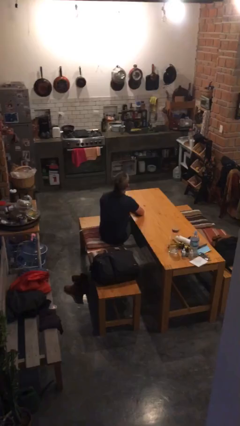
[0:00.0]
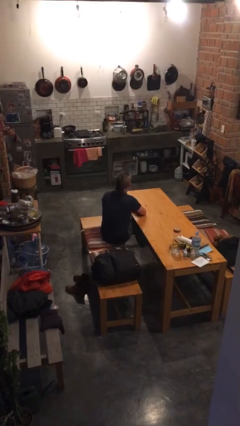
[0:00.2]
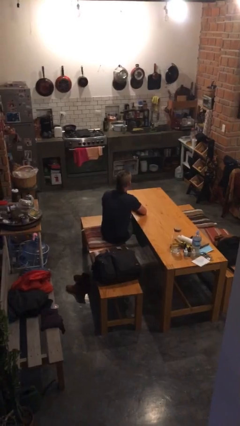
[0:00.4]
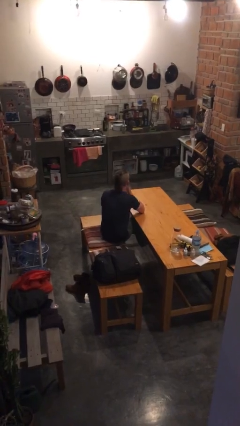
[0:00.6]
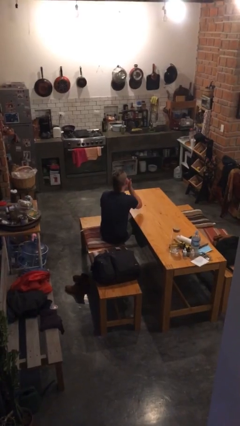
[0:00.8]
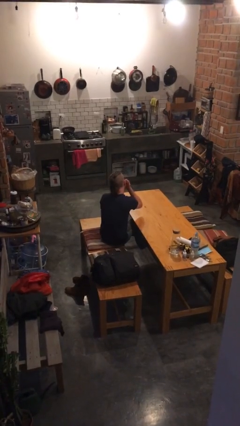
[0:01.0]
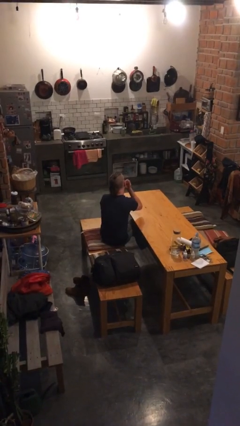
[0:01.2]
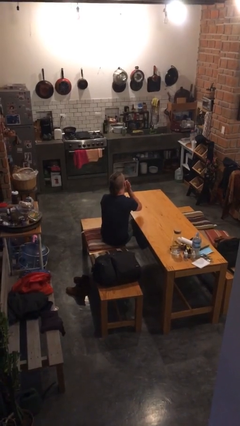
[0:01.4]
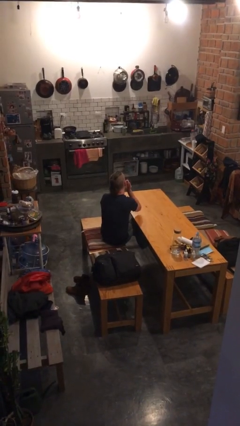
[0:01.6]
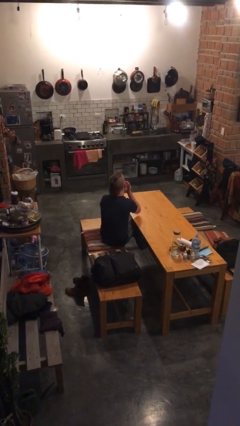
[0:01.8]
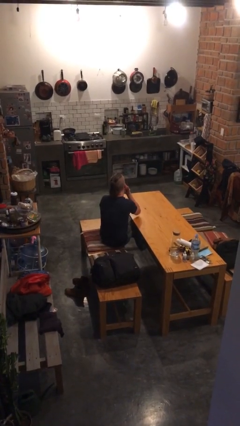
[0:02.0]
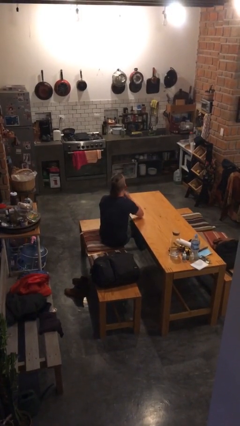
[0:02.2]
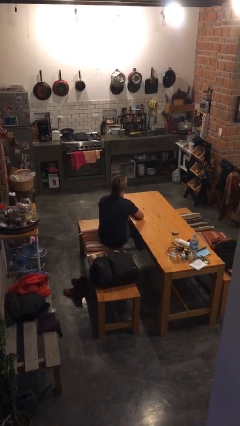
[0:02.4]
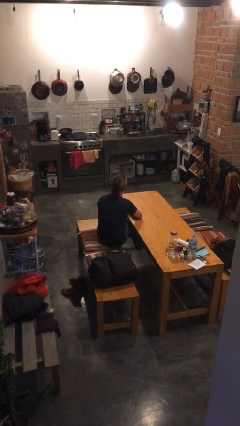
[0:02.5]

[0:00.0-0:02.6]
person licks fingers

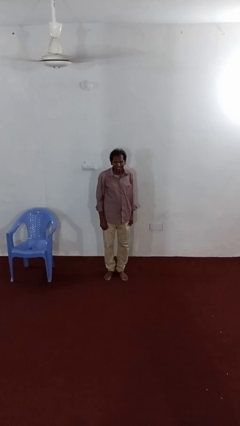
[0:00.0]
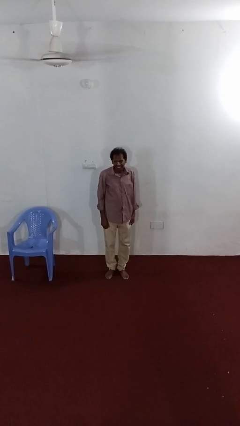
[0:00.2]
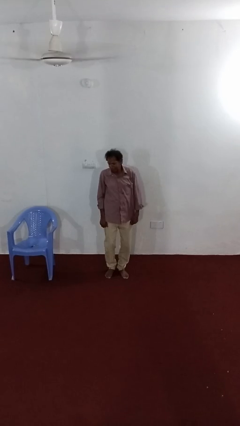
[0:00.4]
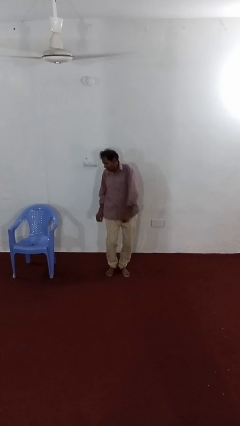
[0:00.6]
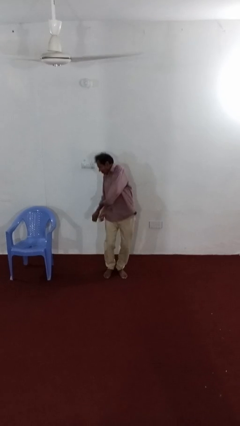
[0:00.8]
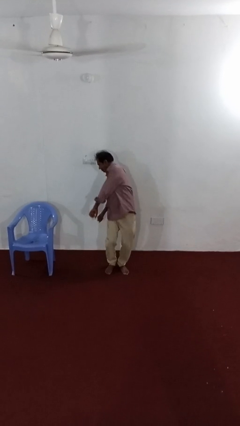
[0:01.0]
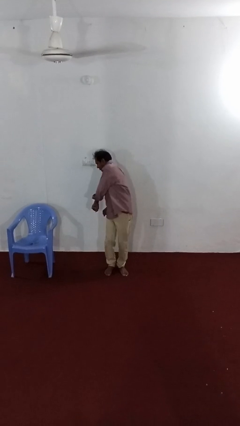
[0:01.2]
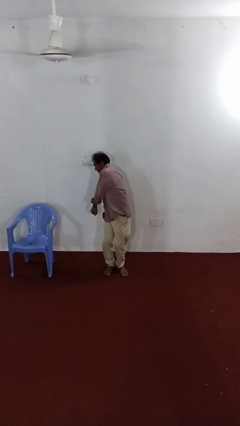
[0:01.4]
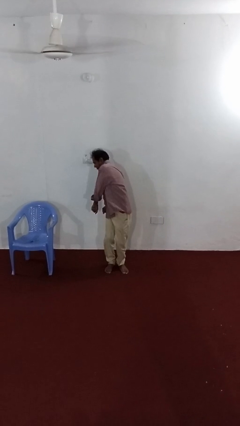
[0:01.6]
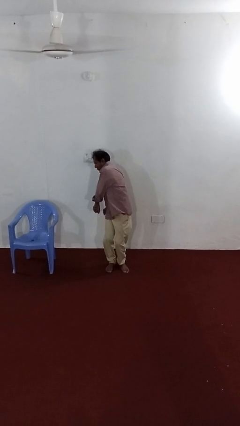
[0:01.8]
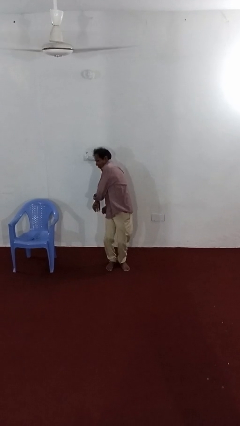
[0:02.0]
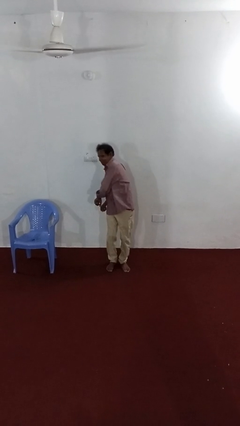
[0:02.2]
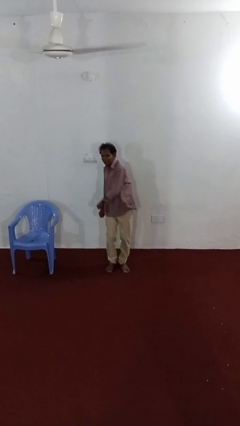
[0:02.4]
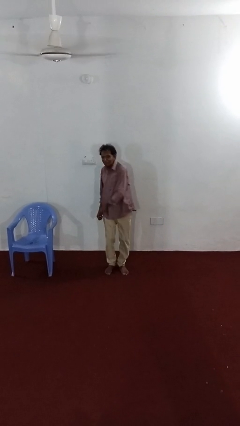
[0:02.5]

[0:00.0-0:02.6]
person dances in place

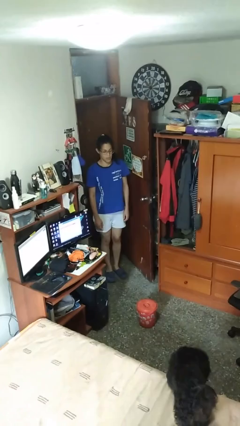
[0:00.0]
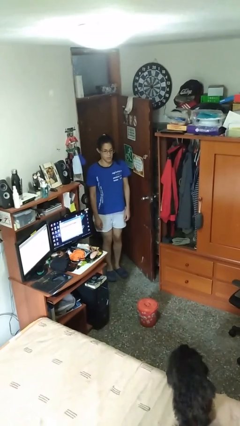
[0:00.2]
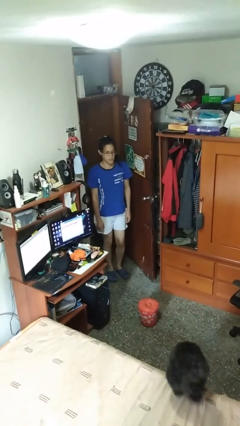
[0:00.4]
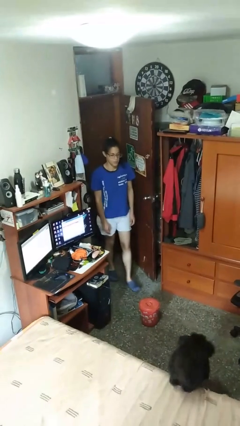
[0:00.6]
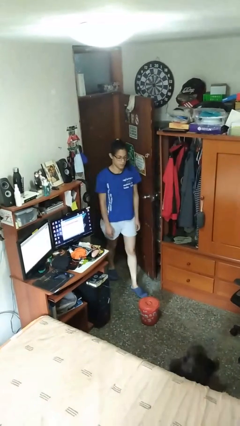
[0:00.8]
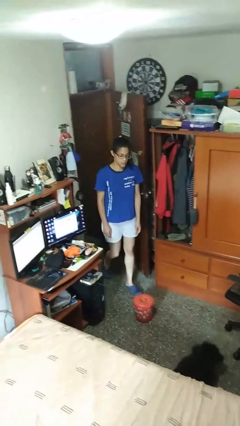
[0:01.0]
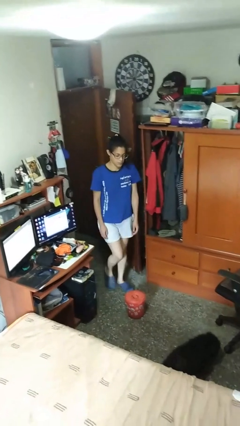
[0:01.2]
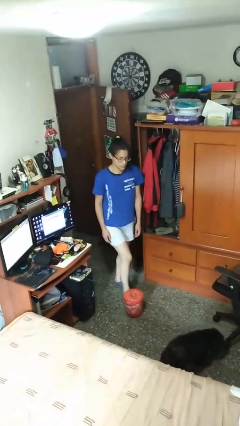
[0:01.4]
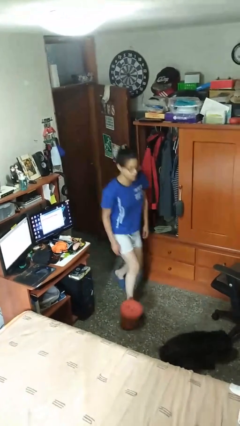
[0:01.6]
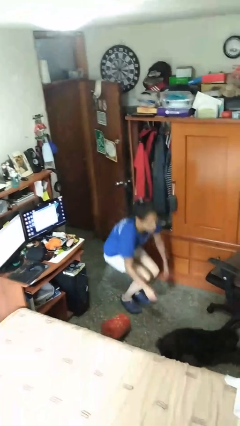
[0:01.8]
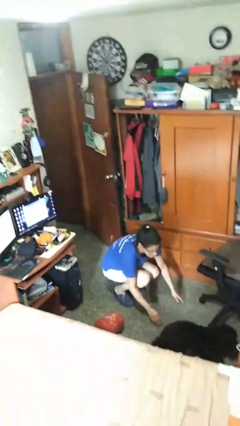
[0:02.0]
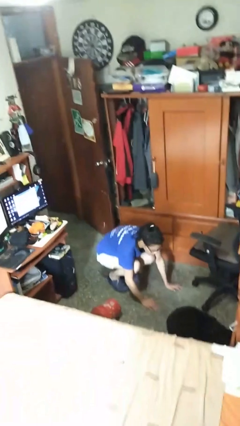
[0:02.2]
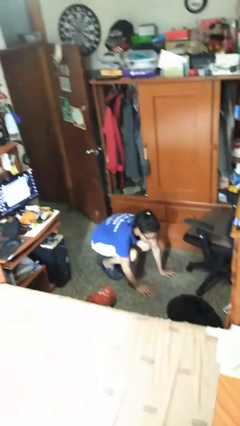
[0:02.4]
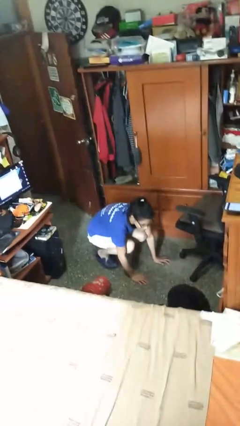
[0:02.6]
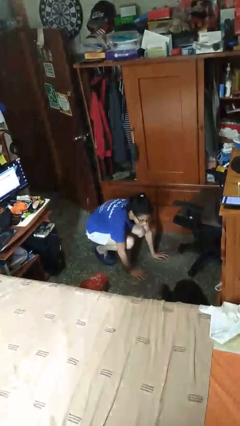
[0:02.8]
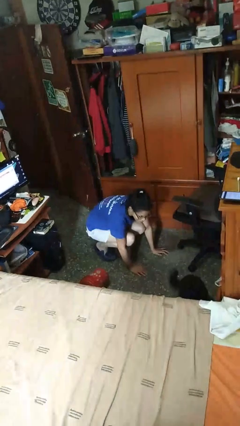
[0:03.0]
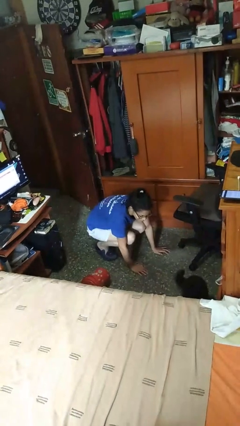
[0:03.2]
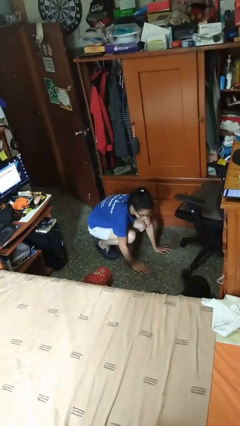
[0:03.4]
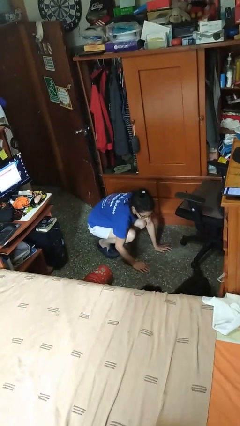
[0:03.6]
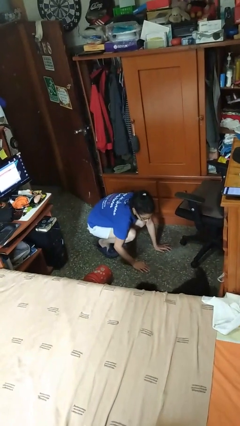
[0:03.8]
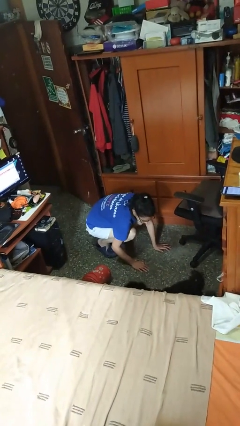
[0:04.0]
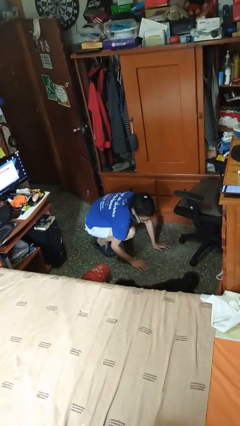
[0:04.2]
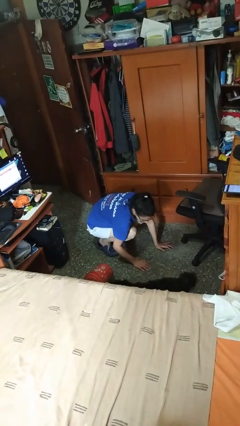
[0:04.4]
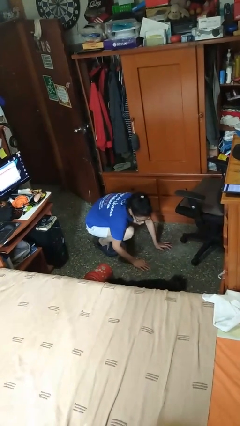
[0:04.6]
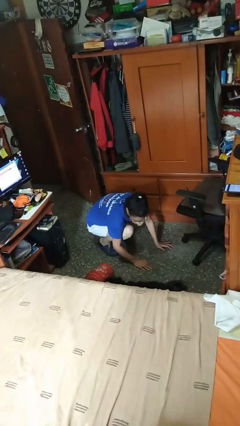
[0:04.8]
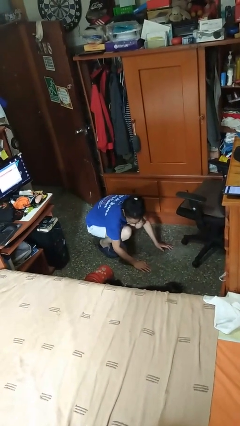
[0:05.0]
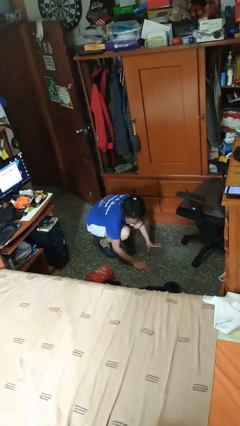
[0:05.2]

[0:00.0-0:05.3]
person trips on object on floor

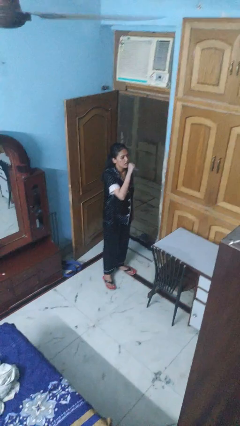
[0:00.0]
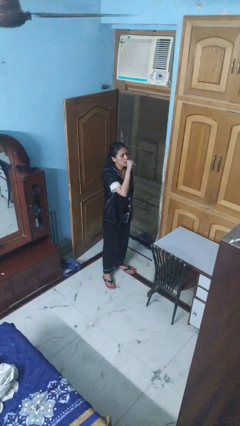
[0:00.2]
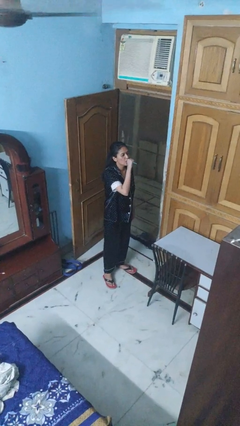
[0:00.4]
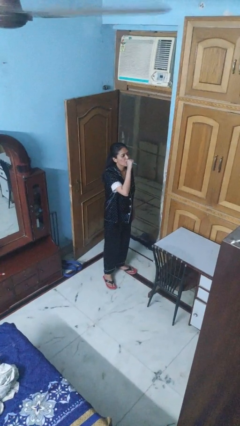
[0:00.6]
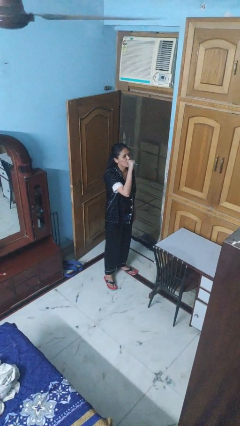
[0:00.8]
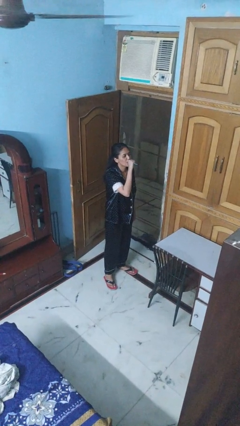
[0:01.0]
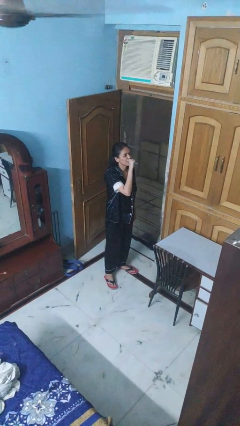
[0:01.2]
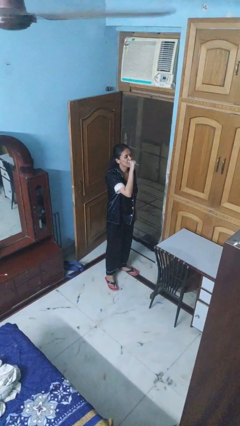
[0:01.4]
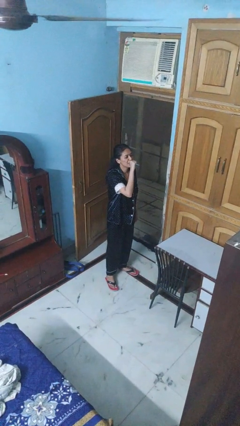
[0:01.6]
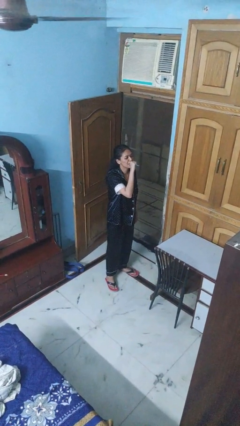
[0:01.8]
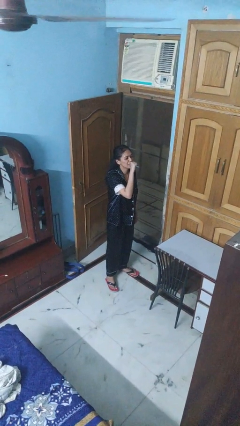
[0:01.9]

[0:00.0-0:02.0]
person vapes

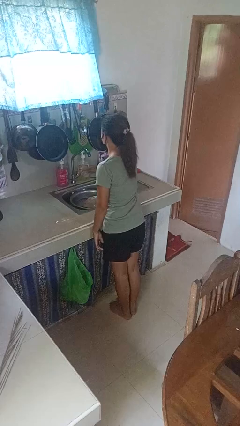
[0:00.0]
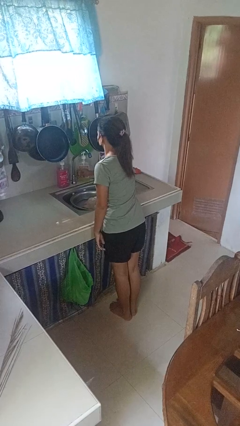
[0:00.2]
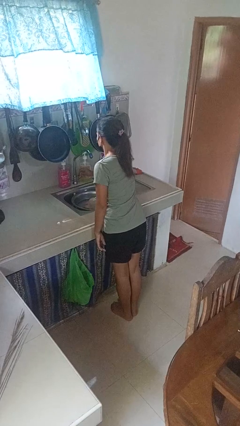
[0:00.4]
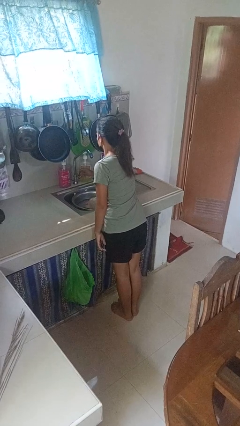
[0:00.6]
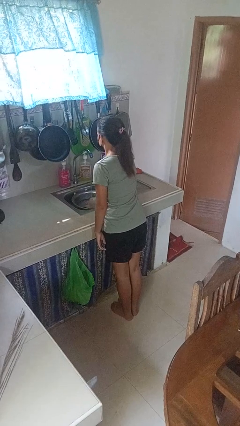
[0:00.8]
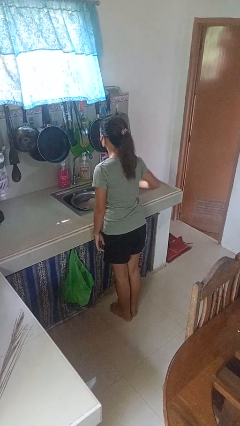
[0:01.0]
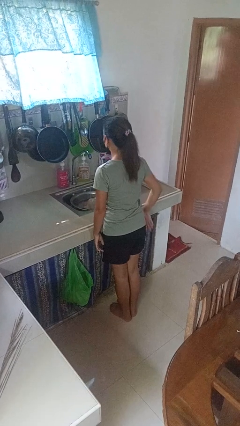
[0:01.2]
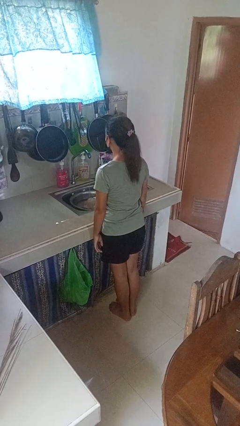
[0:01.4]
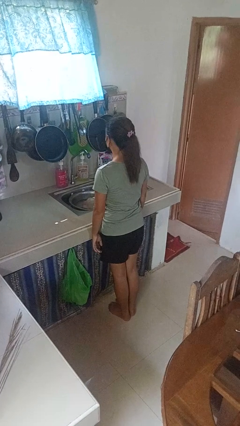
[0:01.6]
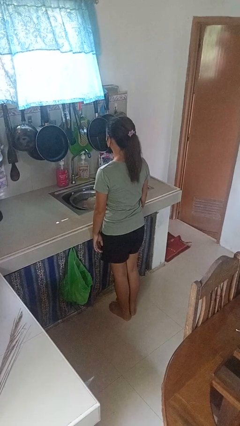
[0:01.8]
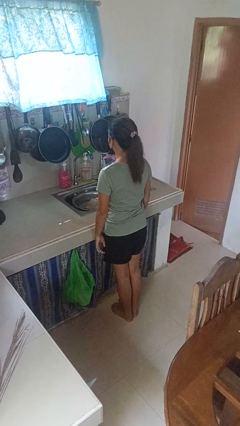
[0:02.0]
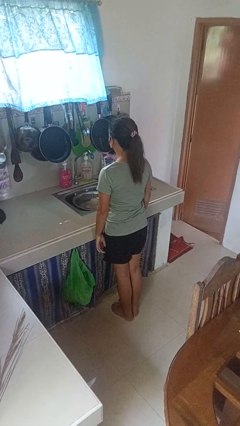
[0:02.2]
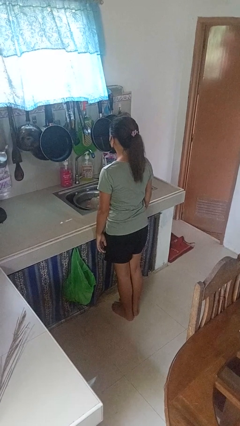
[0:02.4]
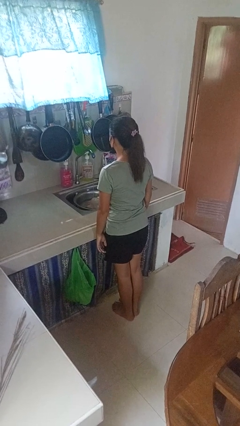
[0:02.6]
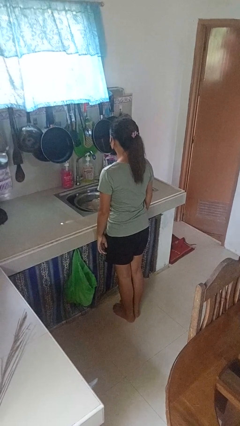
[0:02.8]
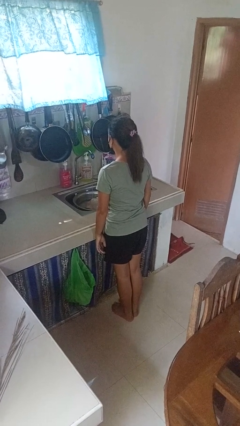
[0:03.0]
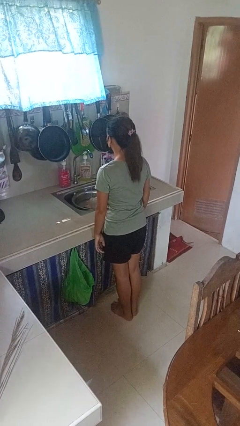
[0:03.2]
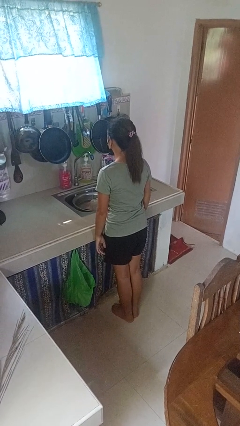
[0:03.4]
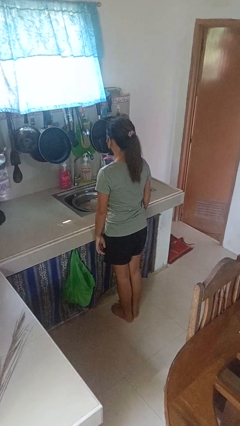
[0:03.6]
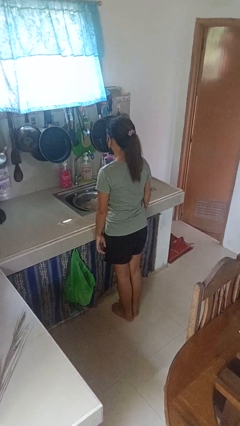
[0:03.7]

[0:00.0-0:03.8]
person turns on faucet

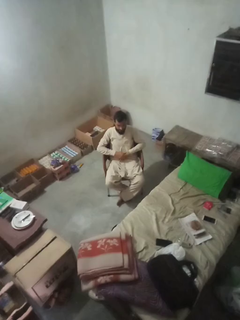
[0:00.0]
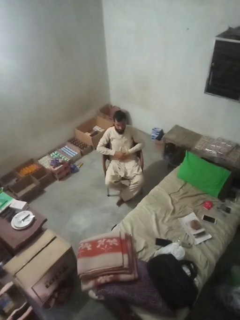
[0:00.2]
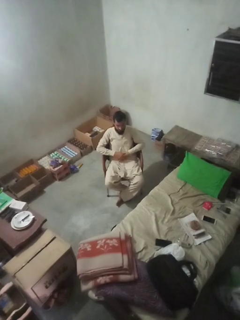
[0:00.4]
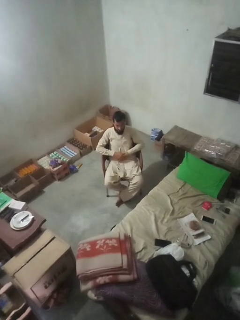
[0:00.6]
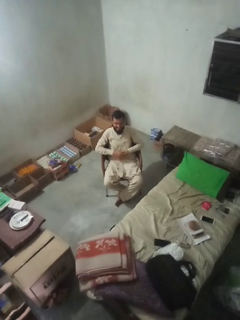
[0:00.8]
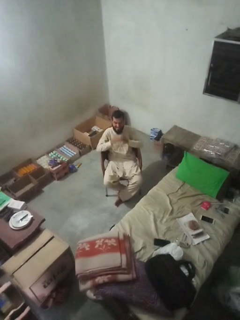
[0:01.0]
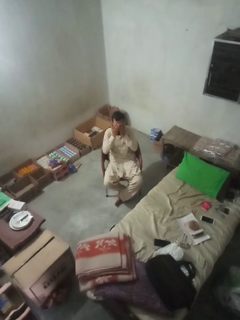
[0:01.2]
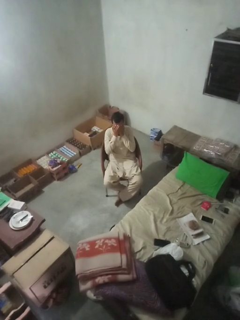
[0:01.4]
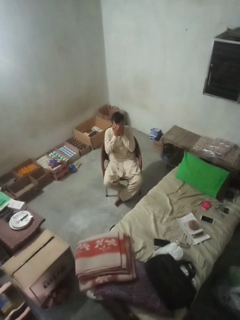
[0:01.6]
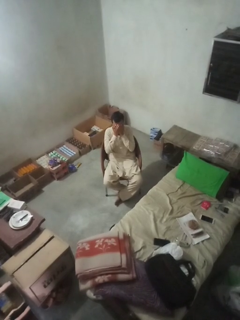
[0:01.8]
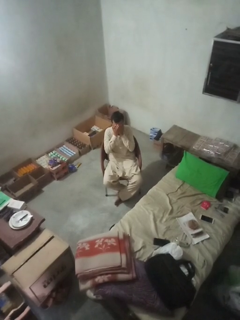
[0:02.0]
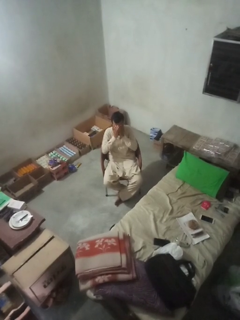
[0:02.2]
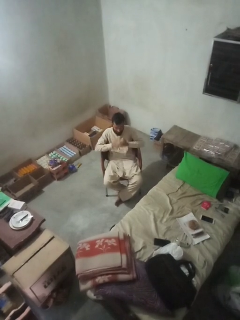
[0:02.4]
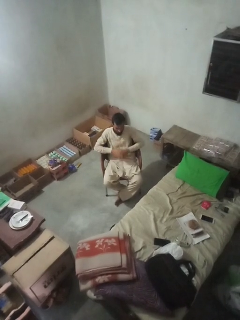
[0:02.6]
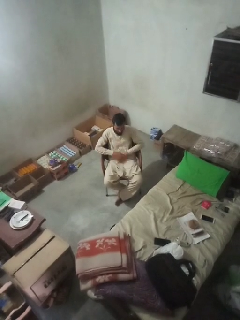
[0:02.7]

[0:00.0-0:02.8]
person covers face with hands
